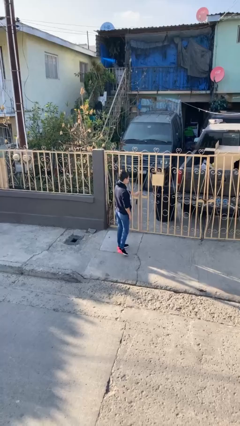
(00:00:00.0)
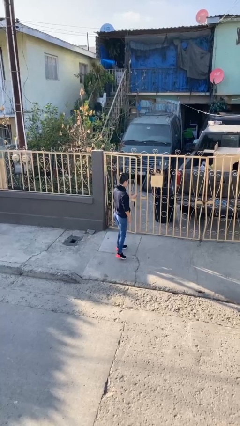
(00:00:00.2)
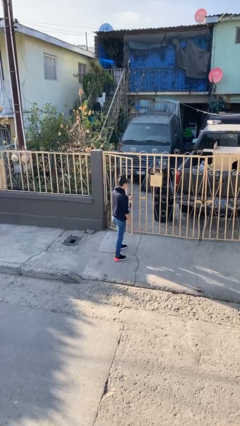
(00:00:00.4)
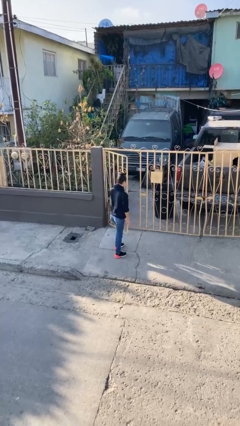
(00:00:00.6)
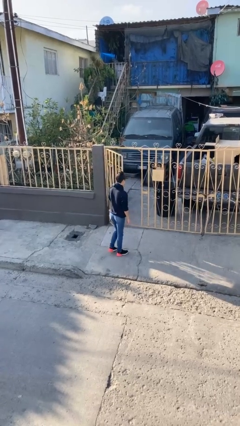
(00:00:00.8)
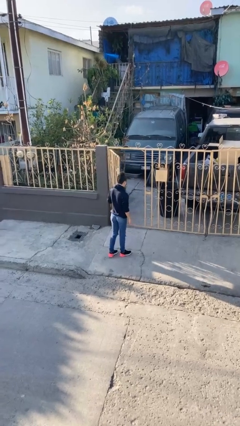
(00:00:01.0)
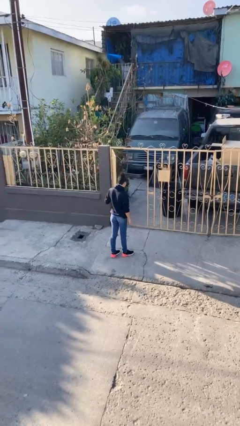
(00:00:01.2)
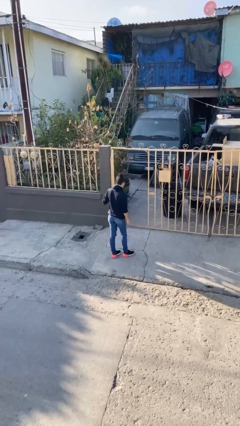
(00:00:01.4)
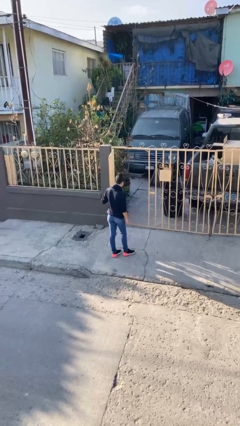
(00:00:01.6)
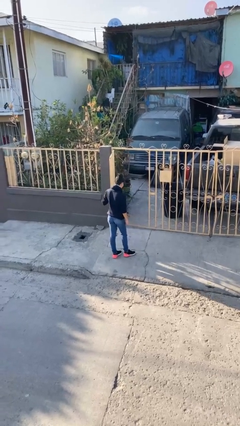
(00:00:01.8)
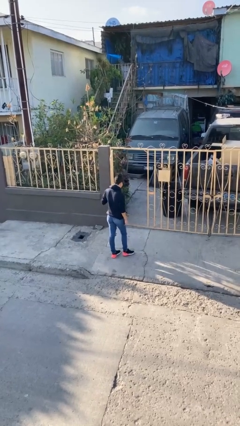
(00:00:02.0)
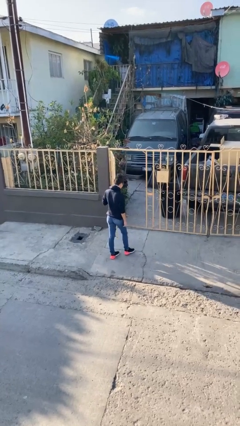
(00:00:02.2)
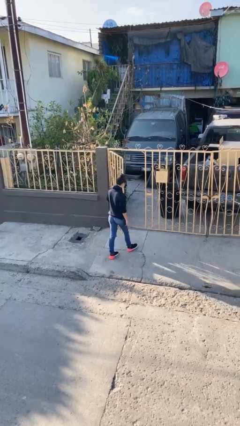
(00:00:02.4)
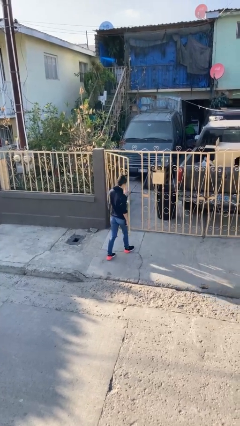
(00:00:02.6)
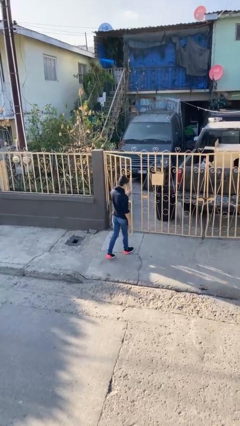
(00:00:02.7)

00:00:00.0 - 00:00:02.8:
person opens facility door

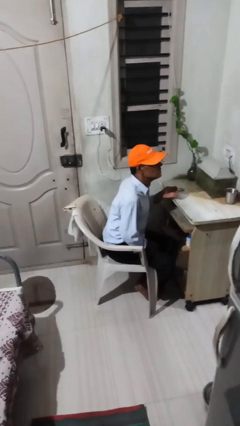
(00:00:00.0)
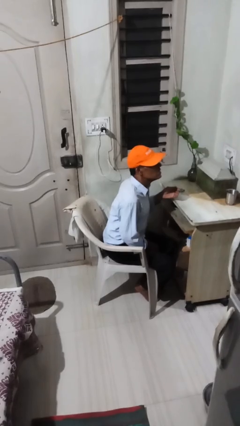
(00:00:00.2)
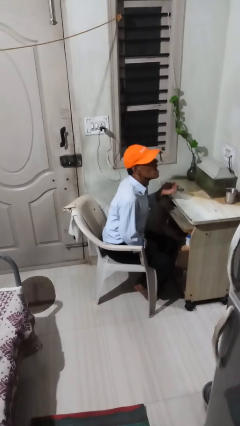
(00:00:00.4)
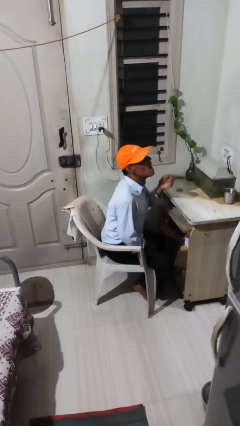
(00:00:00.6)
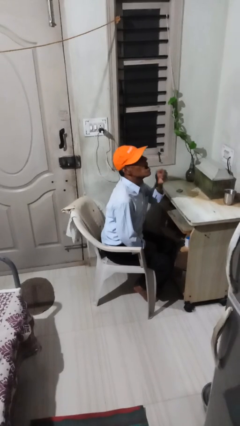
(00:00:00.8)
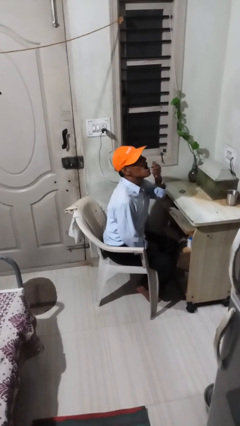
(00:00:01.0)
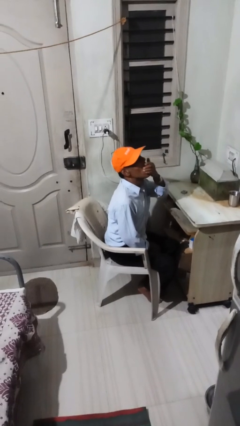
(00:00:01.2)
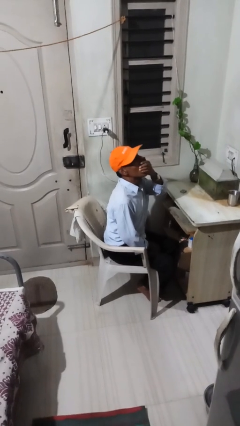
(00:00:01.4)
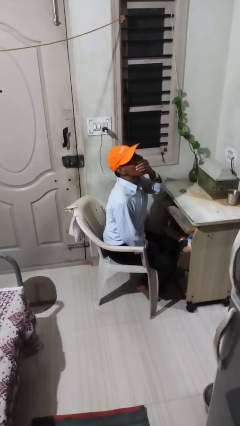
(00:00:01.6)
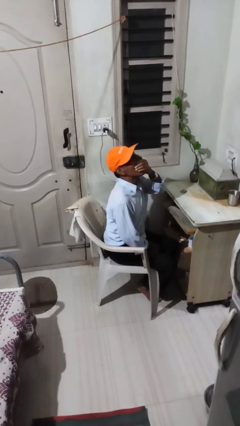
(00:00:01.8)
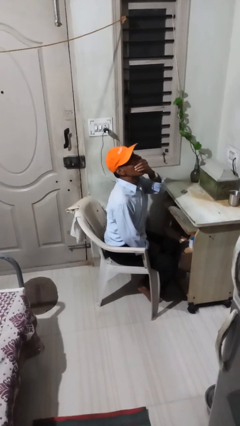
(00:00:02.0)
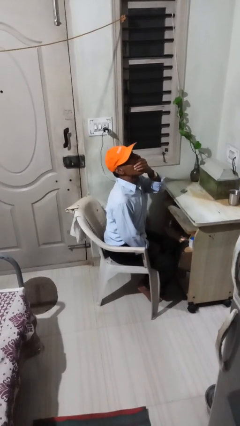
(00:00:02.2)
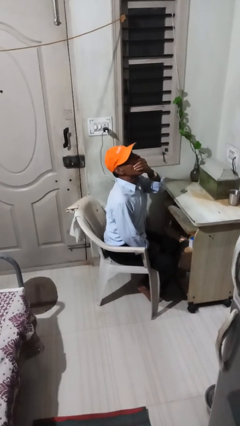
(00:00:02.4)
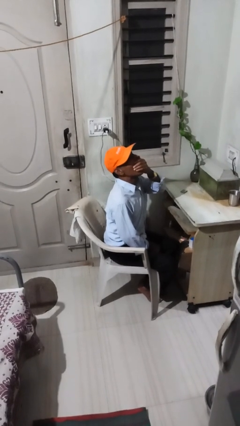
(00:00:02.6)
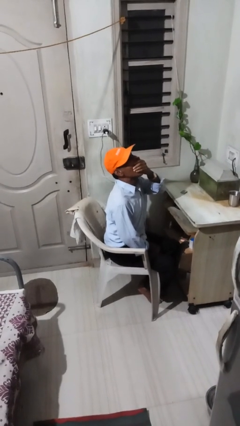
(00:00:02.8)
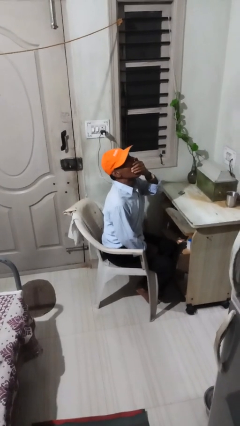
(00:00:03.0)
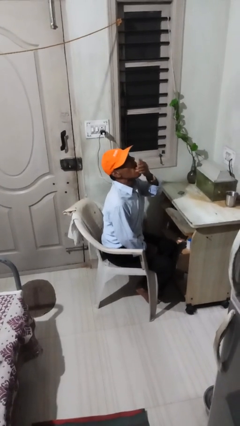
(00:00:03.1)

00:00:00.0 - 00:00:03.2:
person yawns

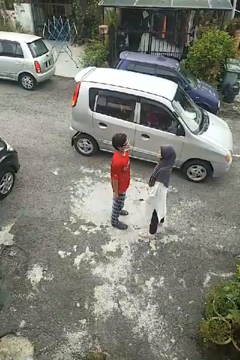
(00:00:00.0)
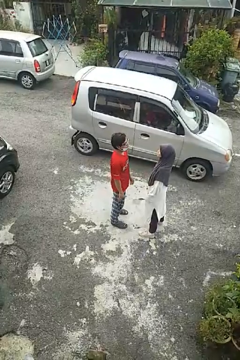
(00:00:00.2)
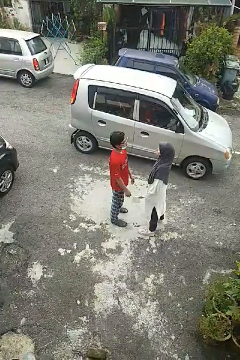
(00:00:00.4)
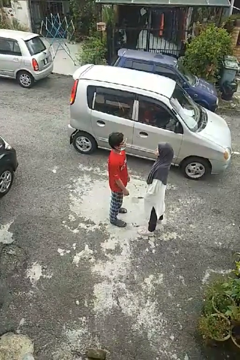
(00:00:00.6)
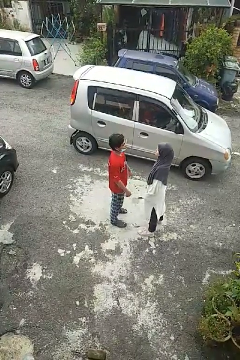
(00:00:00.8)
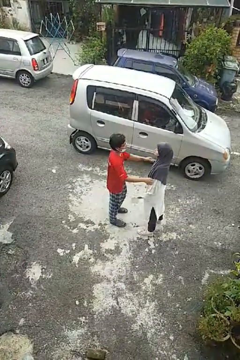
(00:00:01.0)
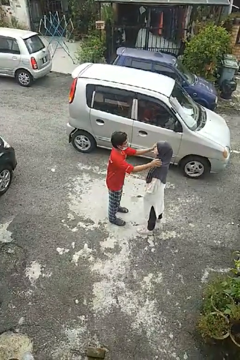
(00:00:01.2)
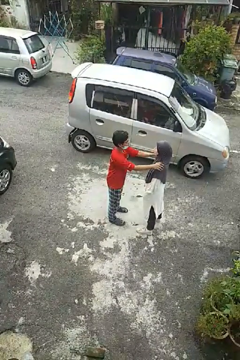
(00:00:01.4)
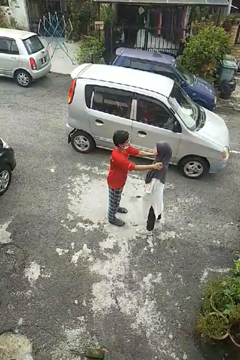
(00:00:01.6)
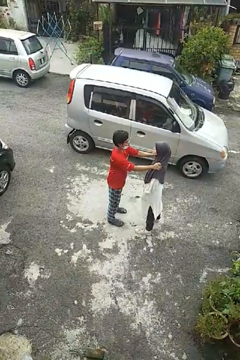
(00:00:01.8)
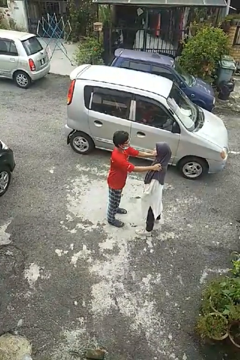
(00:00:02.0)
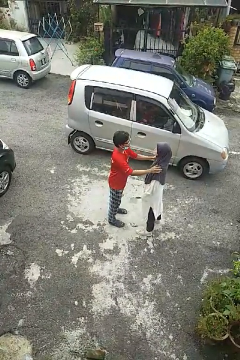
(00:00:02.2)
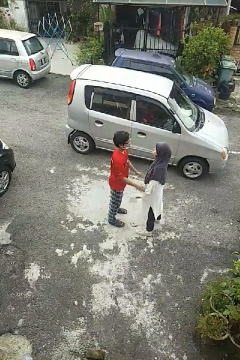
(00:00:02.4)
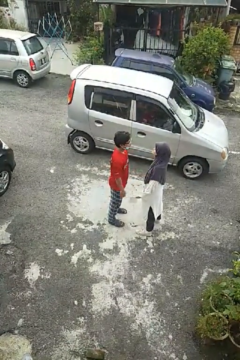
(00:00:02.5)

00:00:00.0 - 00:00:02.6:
person pounds shoulders of person

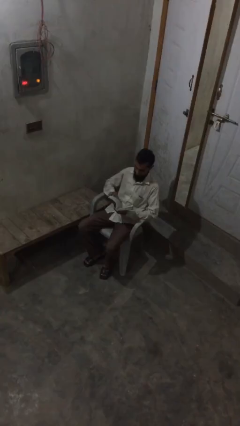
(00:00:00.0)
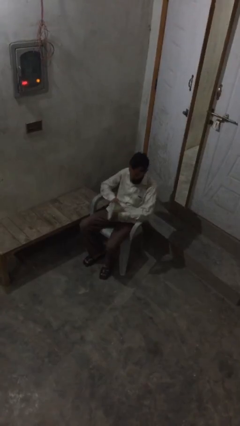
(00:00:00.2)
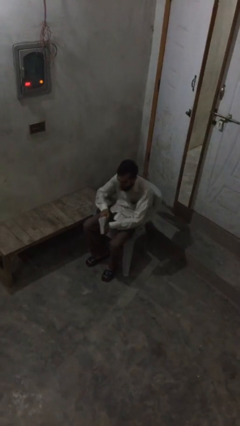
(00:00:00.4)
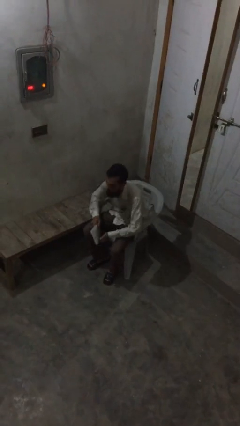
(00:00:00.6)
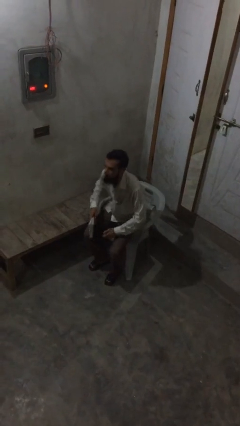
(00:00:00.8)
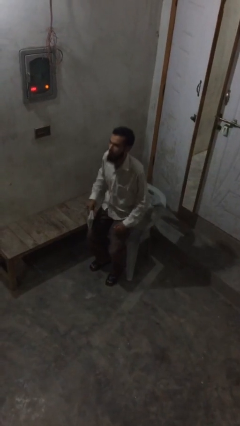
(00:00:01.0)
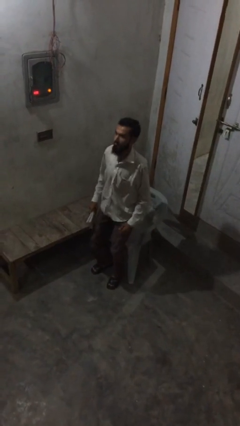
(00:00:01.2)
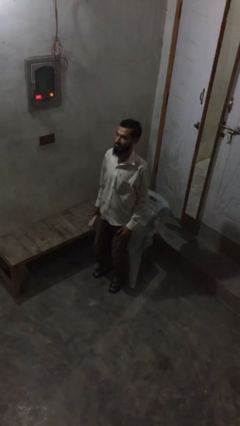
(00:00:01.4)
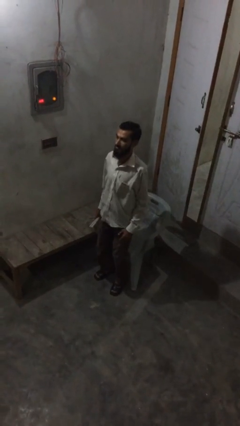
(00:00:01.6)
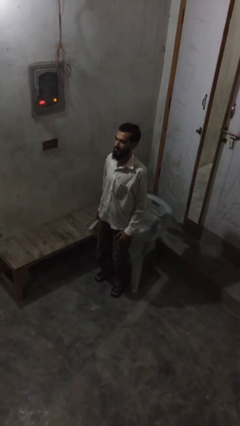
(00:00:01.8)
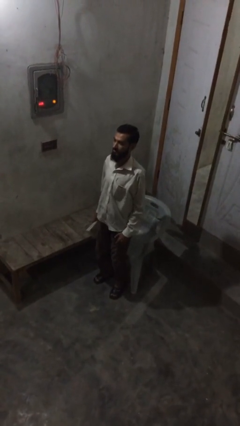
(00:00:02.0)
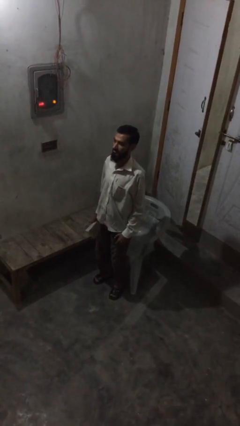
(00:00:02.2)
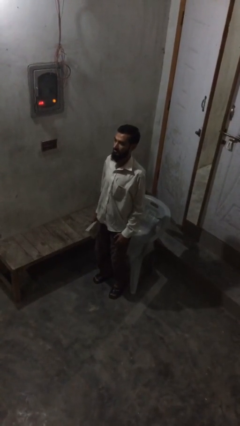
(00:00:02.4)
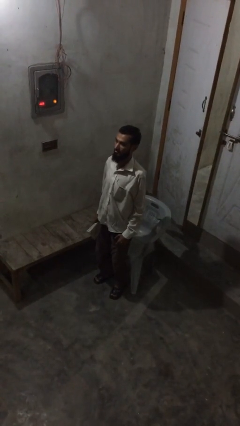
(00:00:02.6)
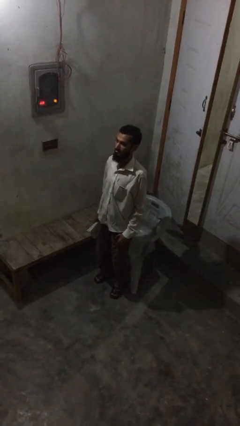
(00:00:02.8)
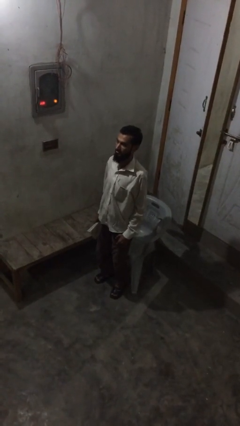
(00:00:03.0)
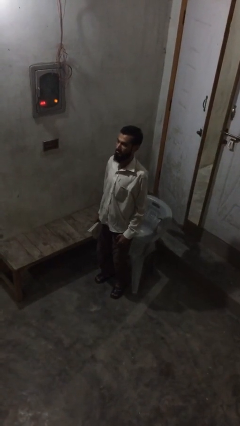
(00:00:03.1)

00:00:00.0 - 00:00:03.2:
person stands up

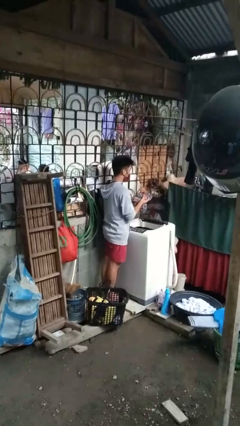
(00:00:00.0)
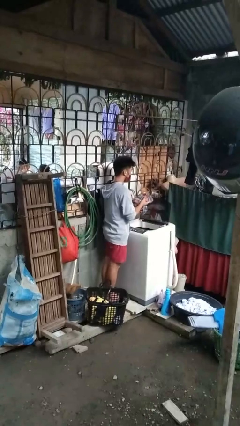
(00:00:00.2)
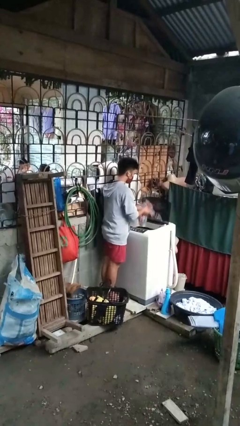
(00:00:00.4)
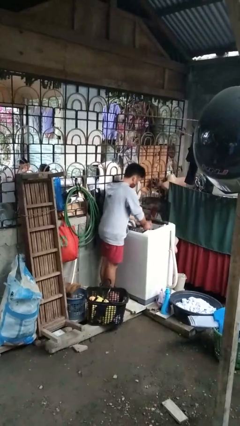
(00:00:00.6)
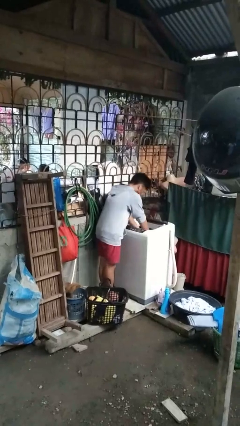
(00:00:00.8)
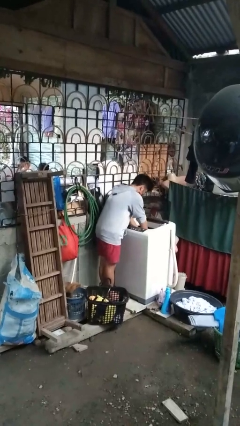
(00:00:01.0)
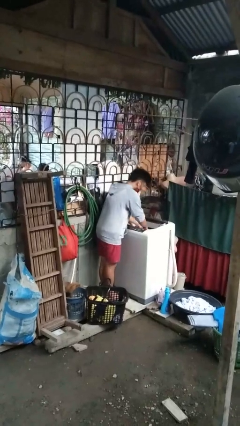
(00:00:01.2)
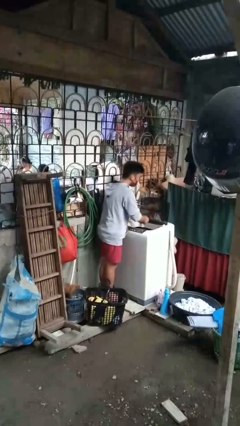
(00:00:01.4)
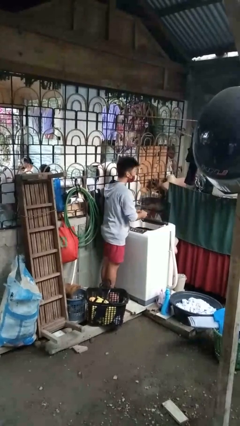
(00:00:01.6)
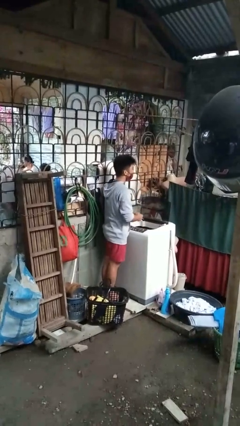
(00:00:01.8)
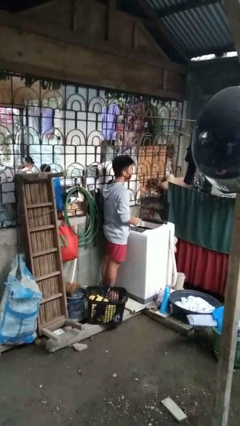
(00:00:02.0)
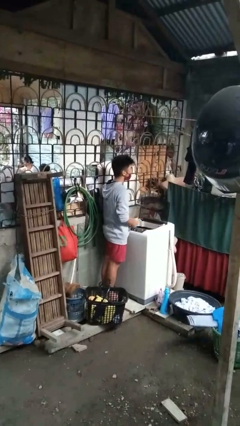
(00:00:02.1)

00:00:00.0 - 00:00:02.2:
person loads dryer

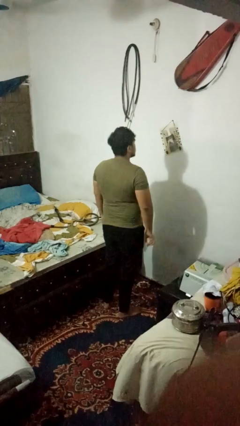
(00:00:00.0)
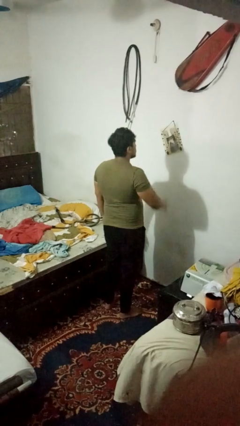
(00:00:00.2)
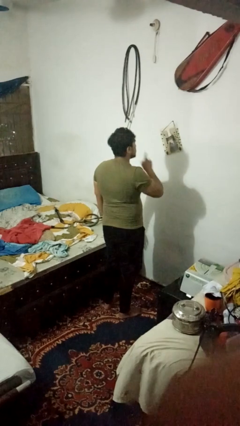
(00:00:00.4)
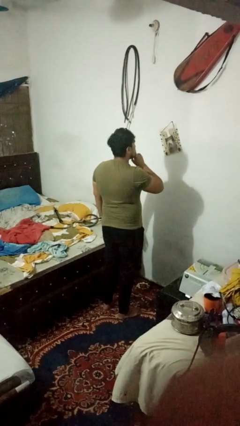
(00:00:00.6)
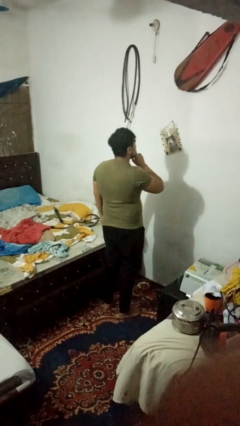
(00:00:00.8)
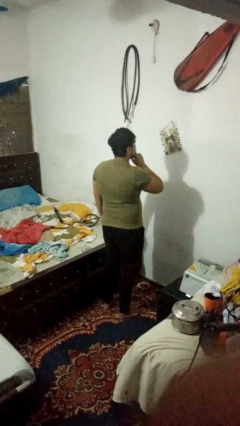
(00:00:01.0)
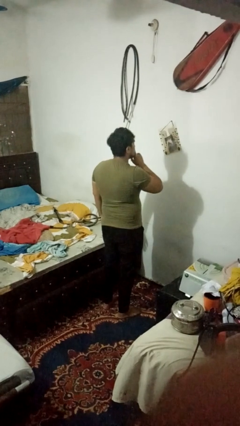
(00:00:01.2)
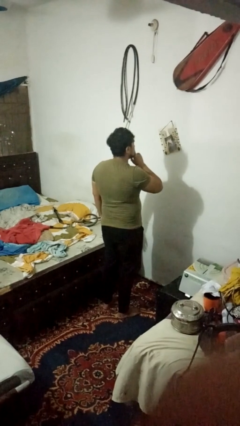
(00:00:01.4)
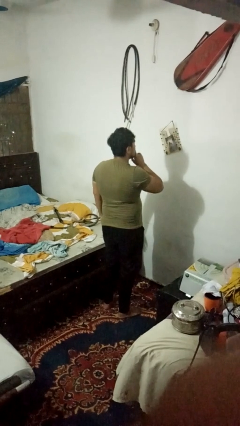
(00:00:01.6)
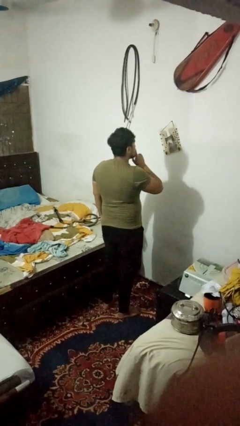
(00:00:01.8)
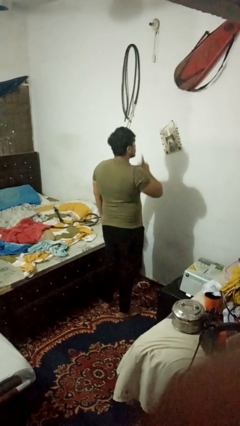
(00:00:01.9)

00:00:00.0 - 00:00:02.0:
person gestures be quiet

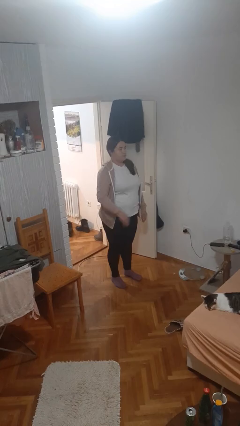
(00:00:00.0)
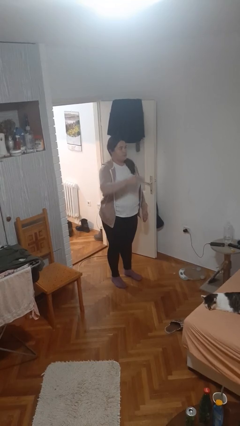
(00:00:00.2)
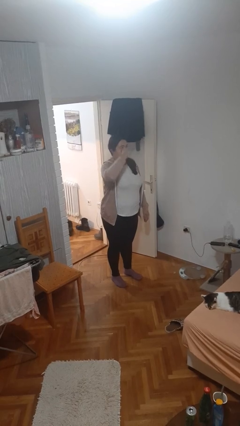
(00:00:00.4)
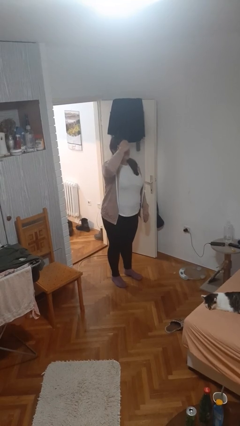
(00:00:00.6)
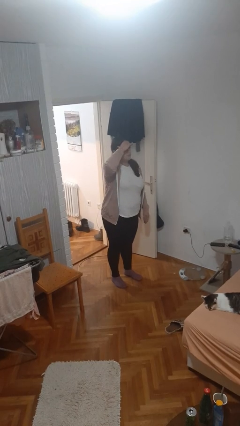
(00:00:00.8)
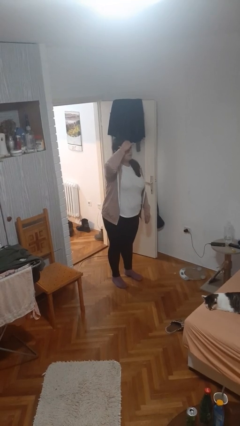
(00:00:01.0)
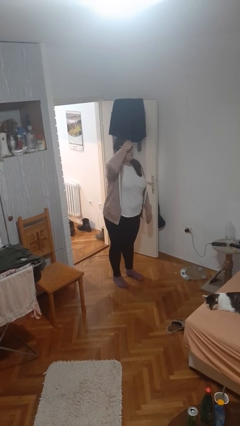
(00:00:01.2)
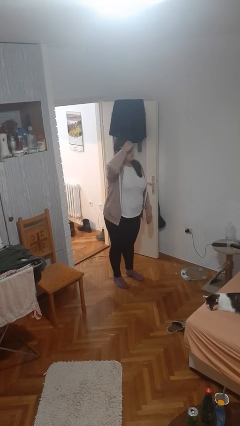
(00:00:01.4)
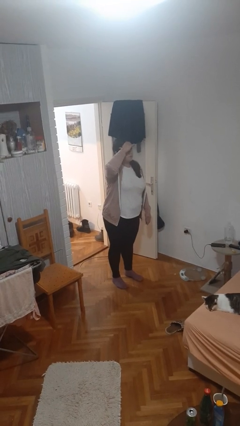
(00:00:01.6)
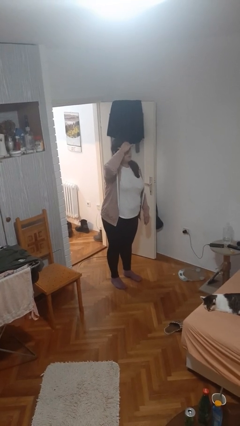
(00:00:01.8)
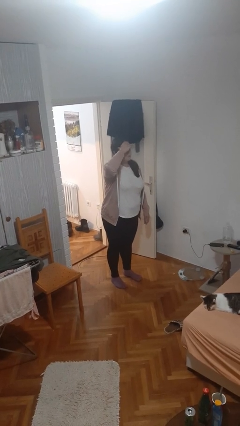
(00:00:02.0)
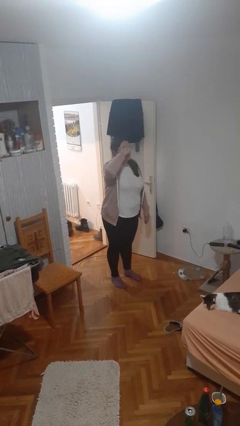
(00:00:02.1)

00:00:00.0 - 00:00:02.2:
person shades eyes
